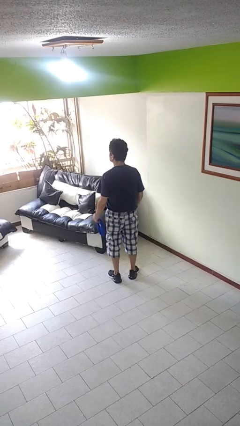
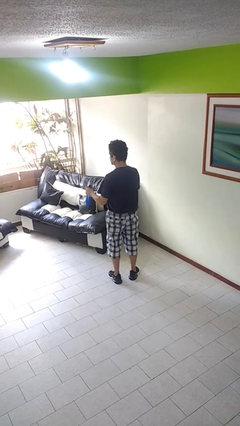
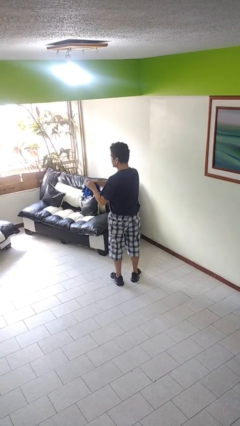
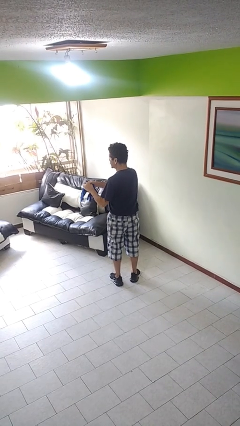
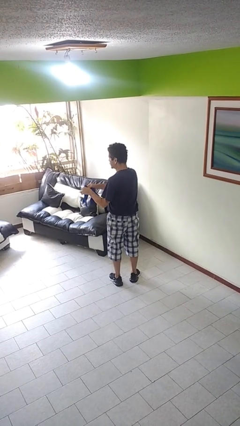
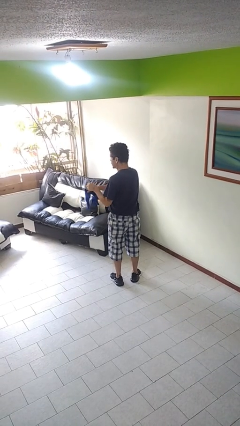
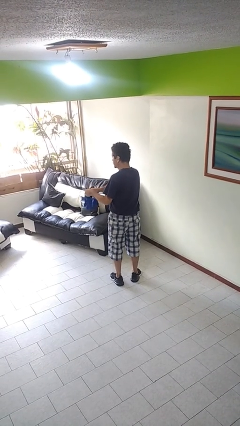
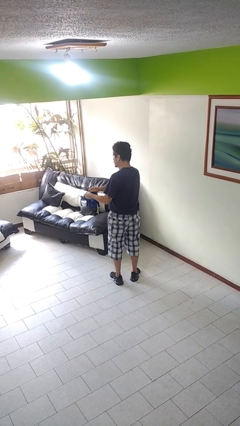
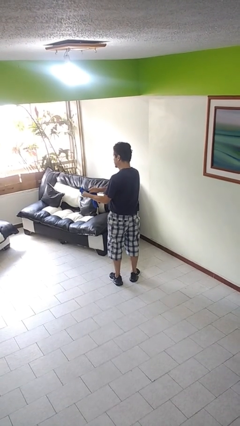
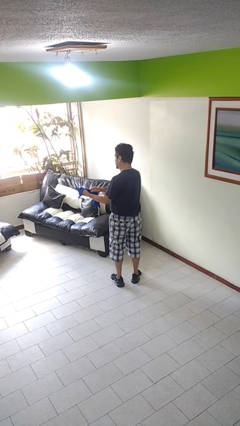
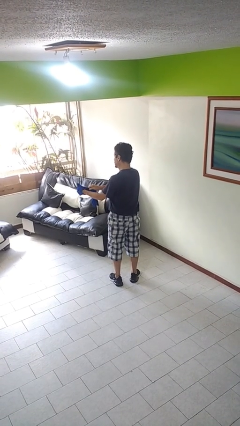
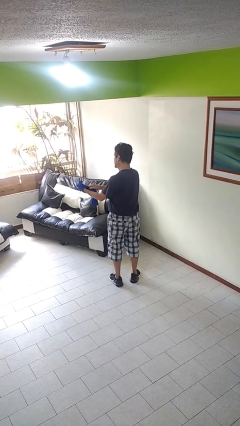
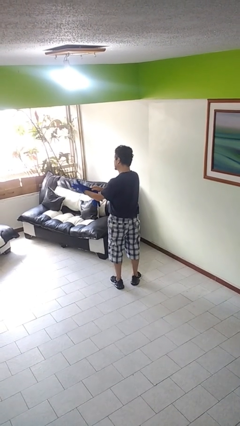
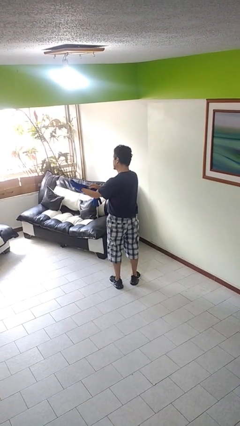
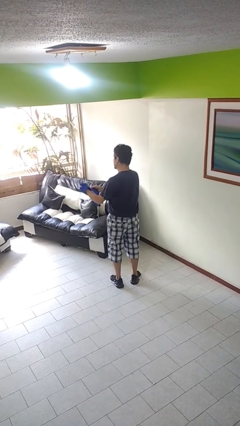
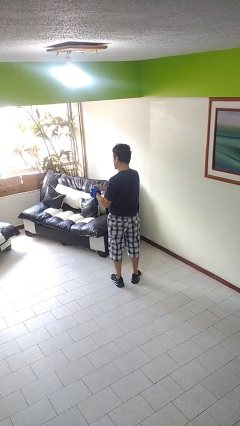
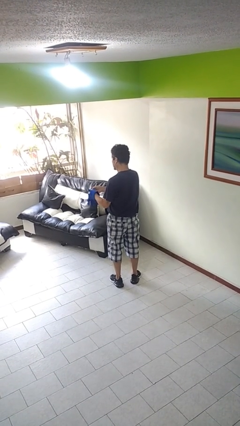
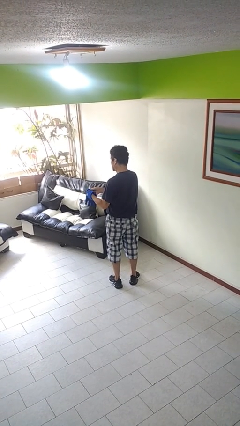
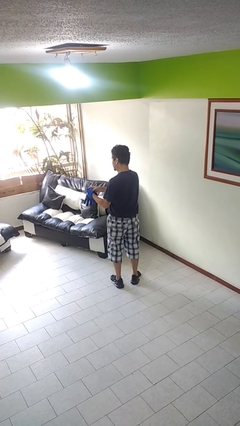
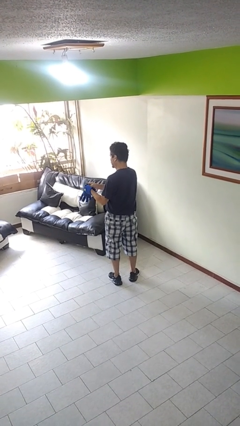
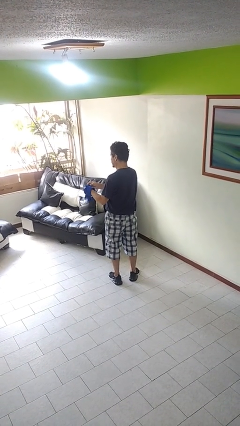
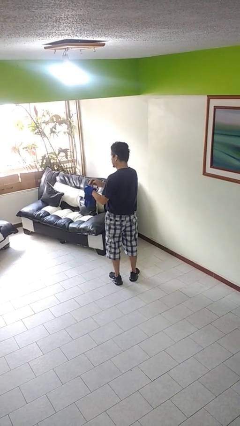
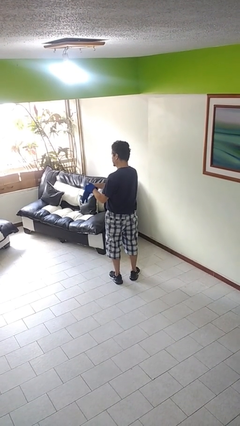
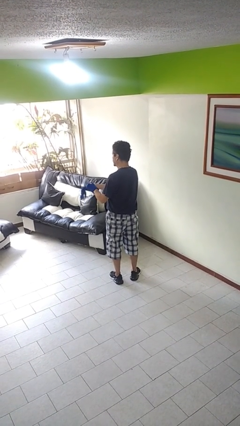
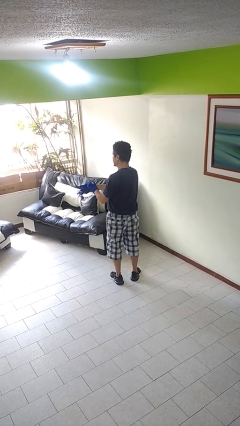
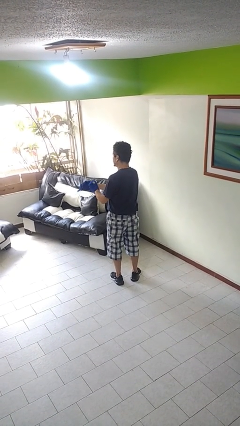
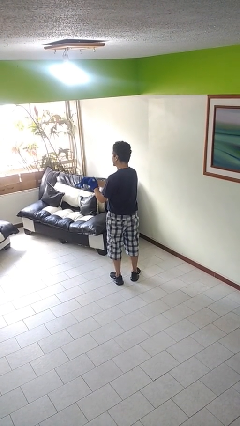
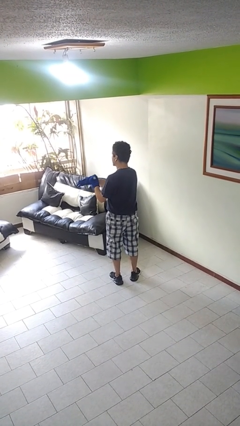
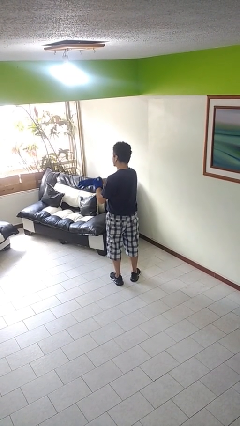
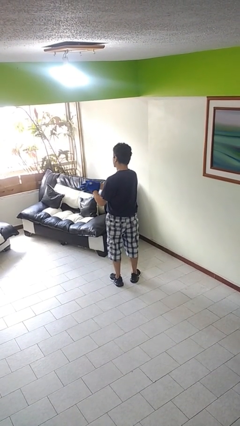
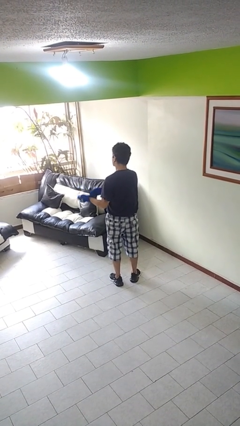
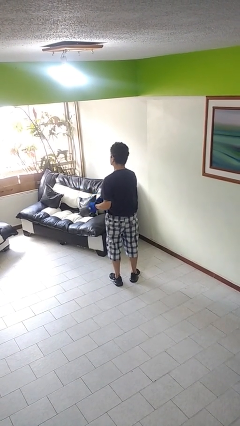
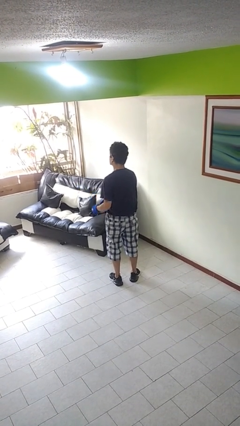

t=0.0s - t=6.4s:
person puts on gloves

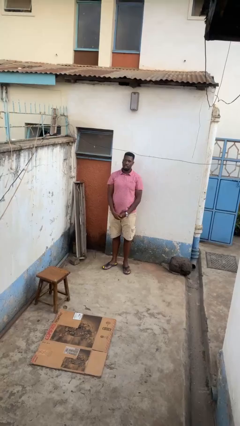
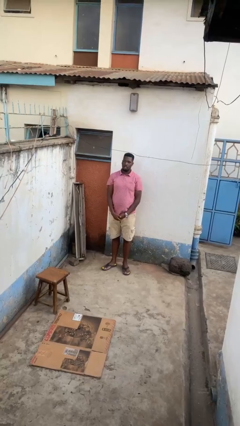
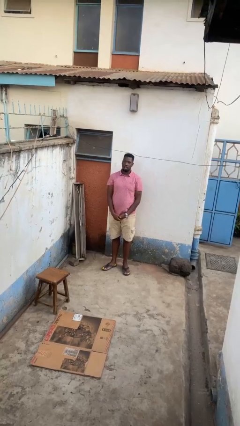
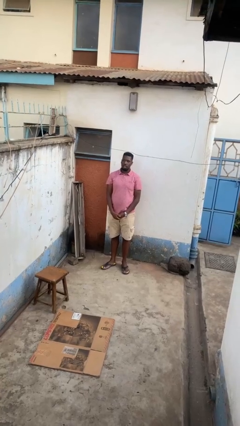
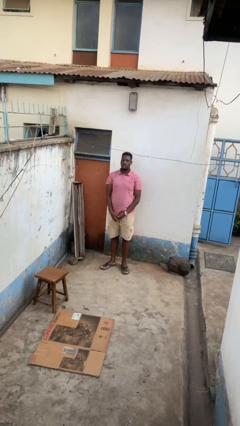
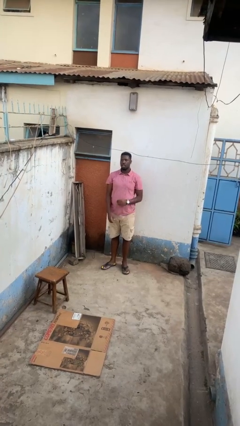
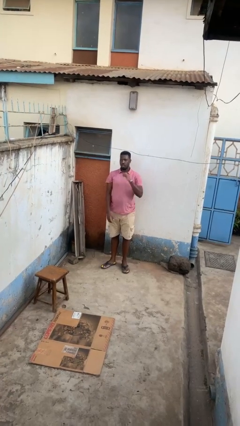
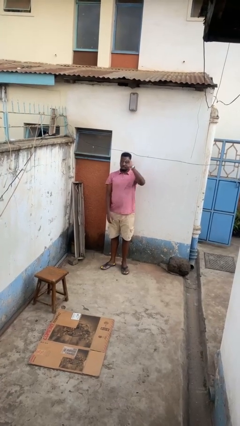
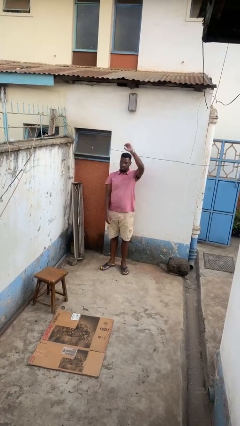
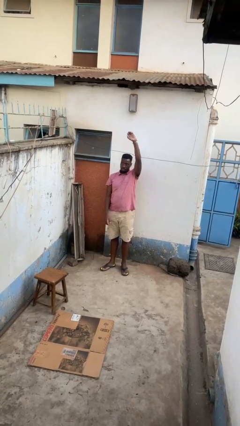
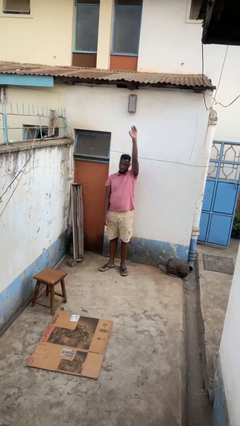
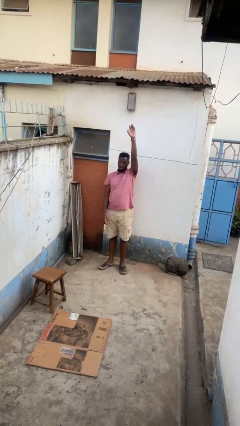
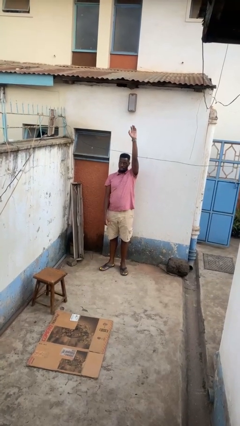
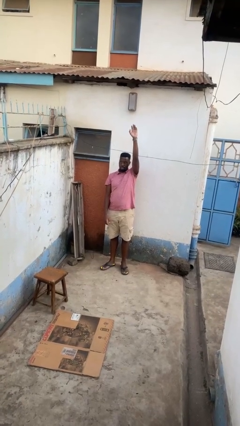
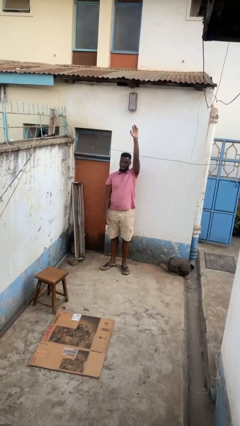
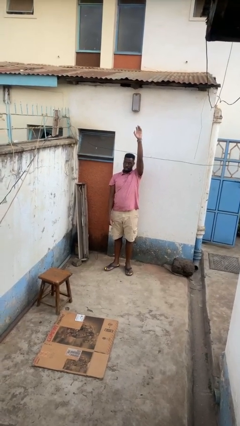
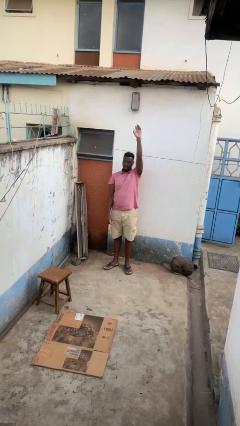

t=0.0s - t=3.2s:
person gestures raise hand

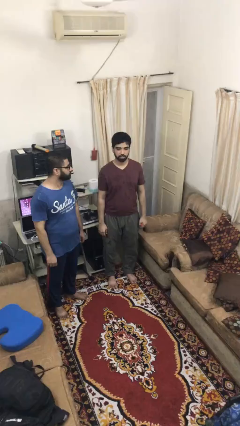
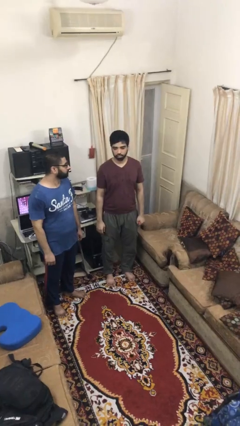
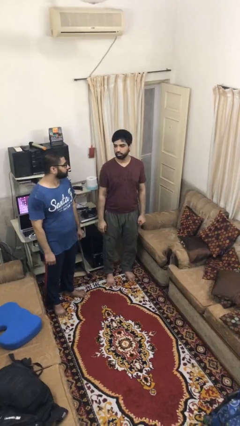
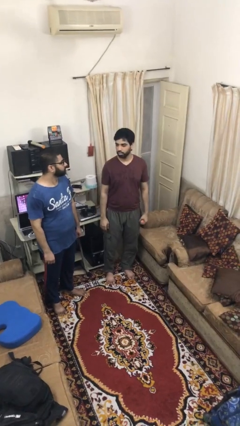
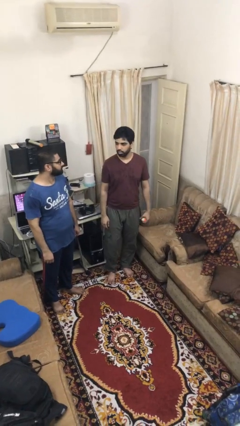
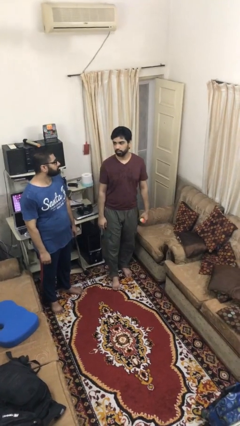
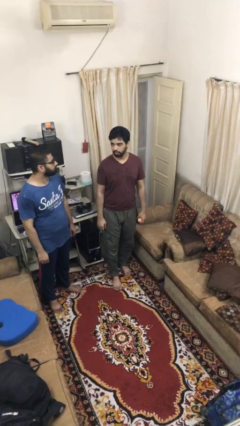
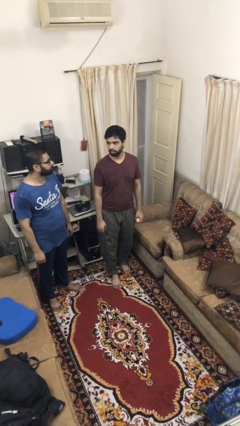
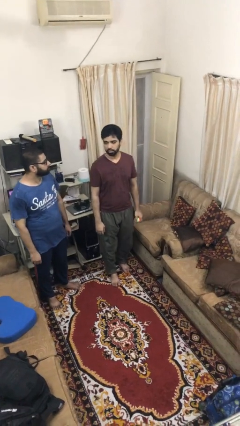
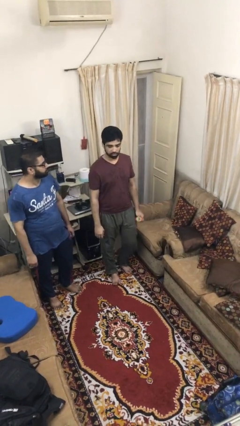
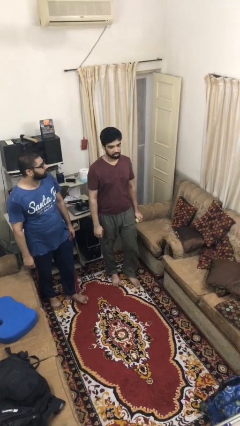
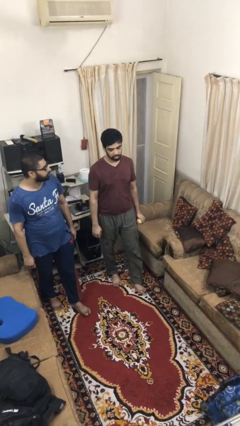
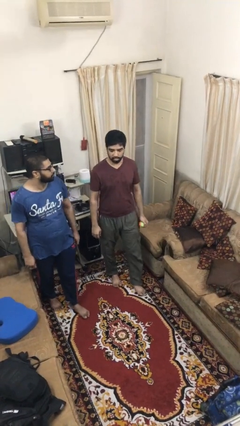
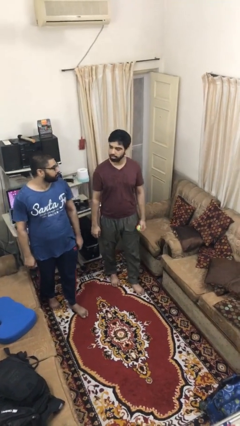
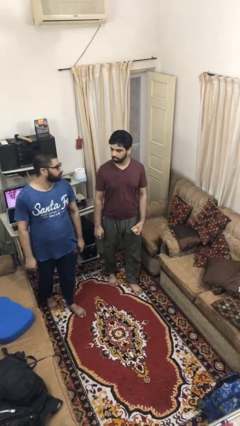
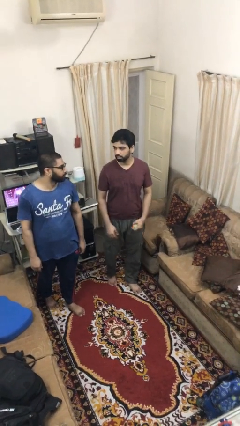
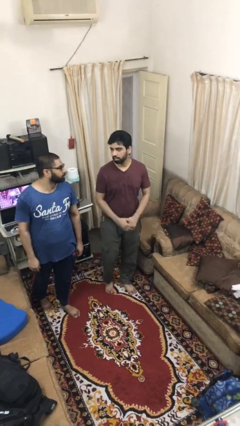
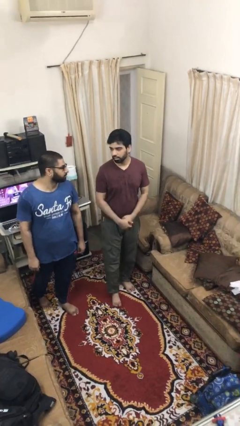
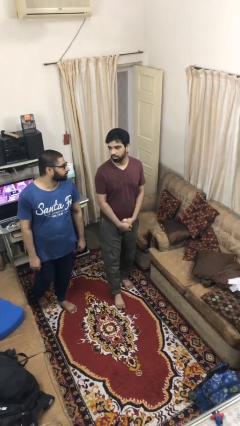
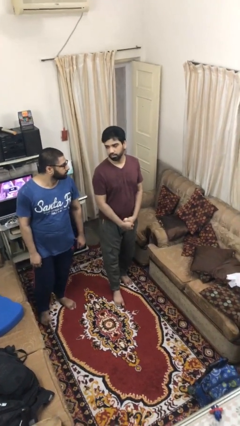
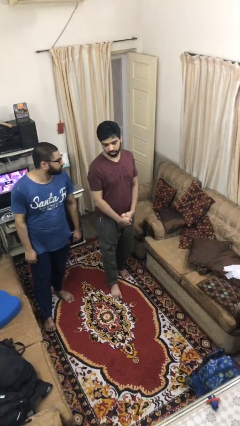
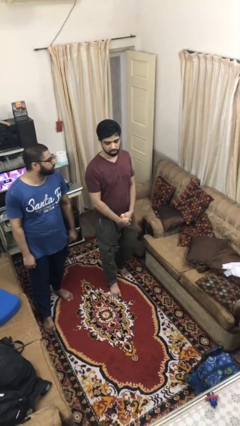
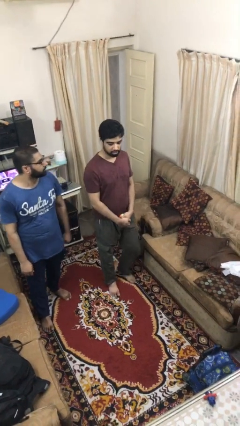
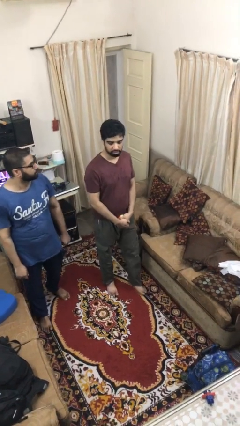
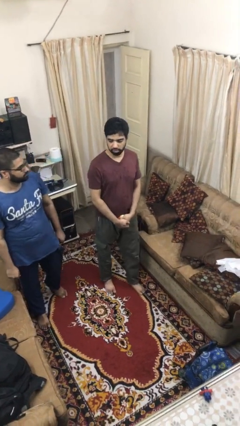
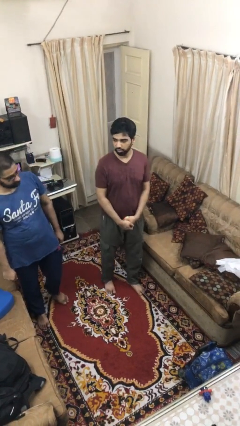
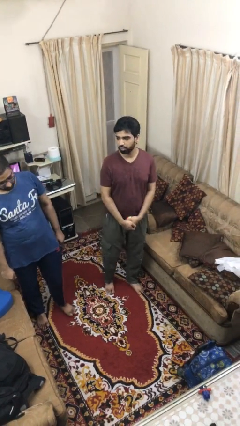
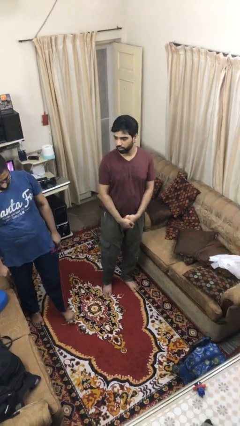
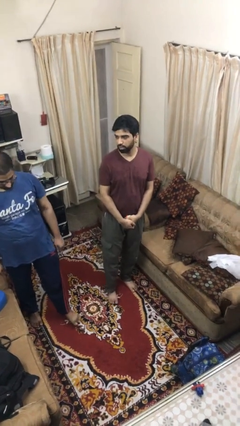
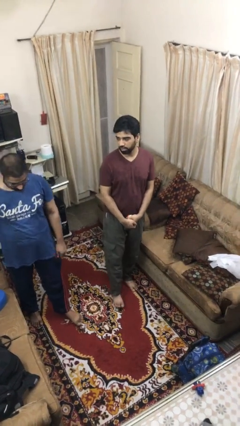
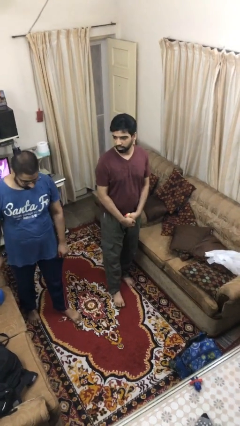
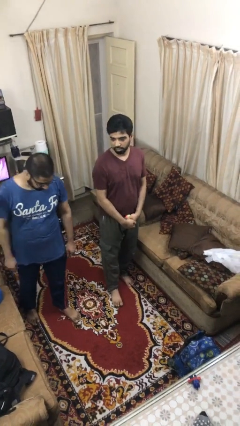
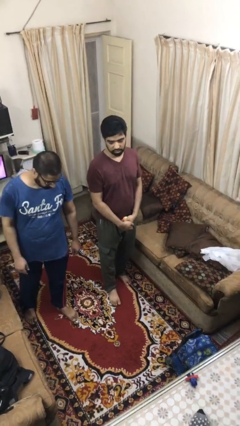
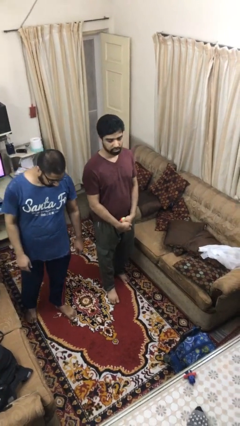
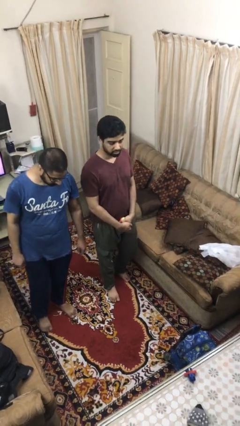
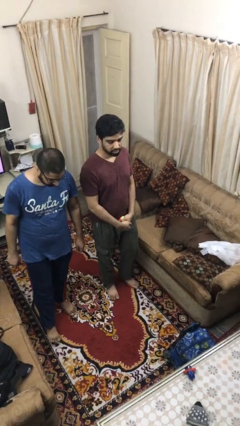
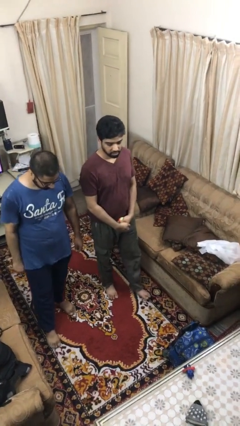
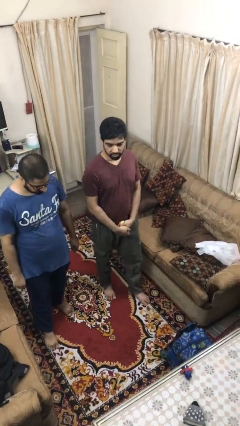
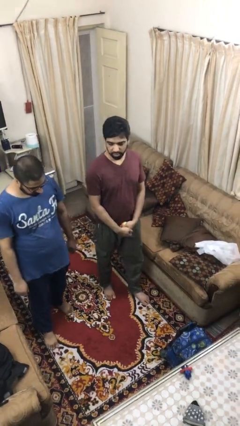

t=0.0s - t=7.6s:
person talks to person

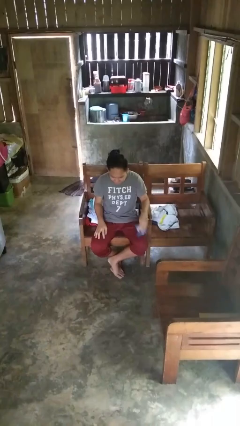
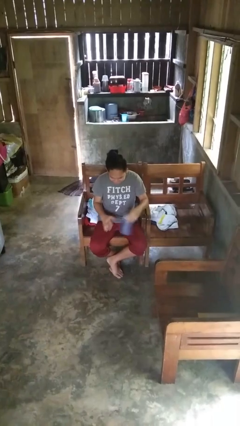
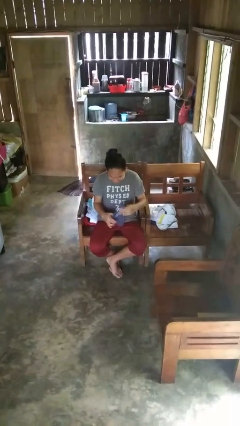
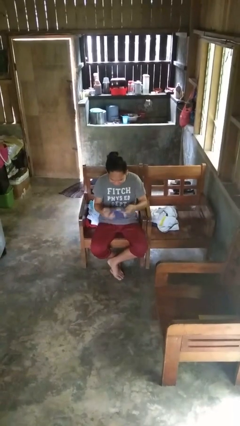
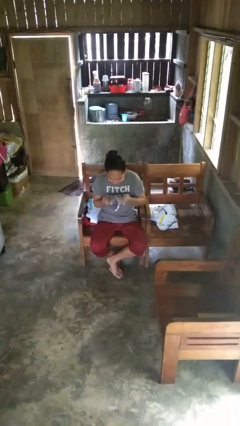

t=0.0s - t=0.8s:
person blows nose
